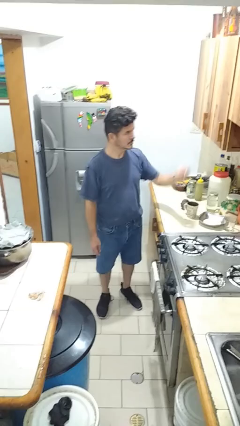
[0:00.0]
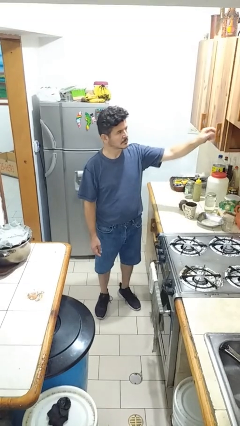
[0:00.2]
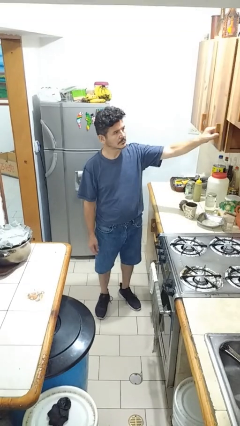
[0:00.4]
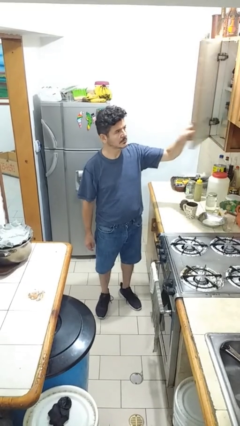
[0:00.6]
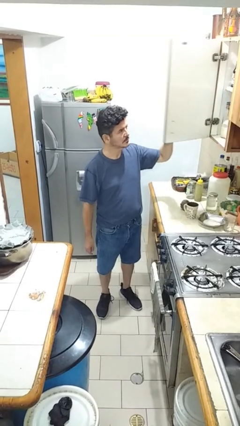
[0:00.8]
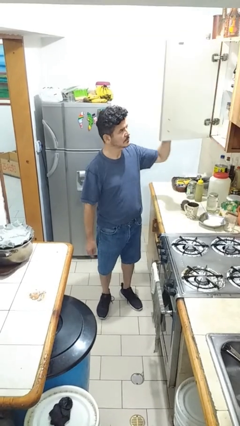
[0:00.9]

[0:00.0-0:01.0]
person opens cabinet

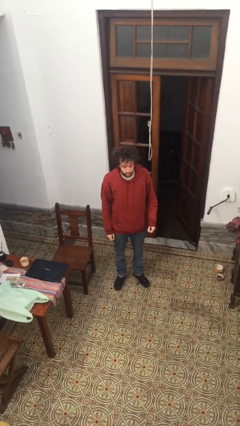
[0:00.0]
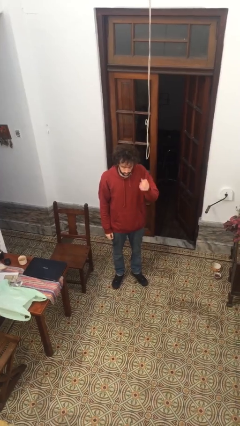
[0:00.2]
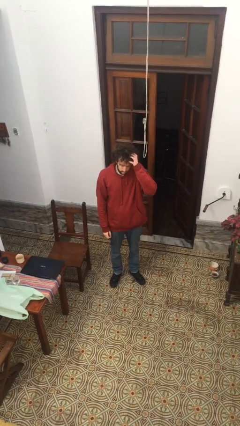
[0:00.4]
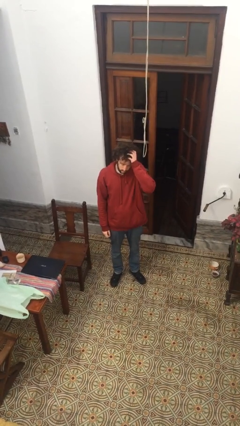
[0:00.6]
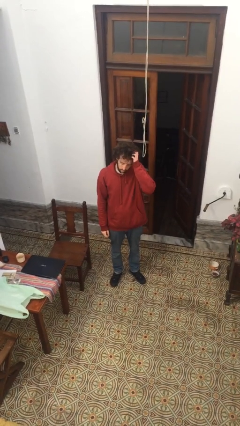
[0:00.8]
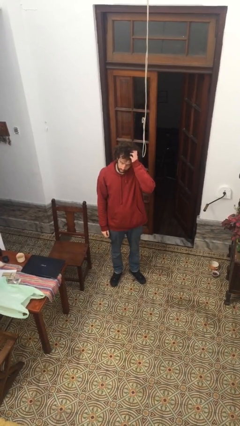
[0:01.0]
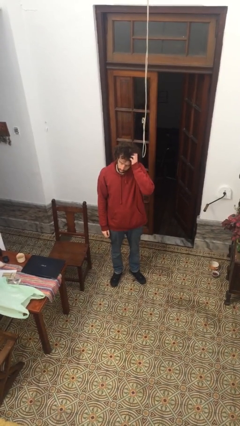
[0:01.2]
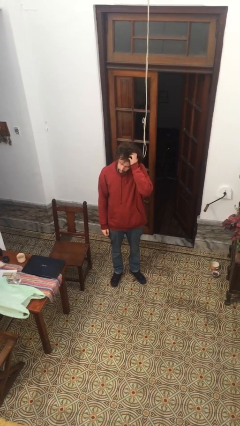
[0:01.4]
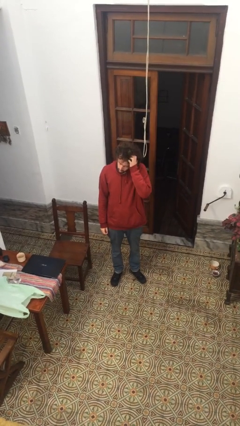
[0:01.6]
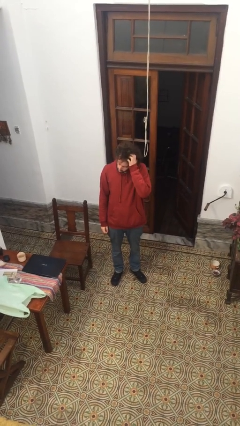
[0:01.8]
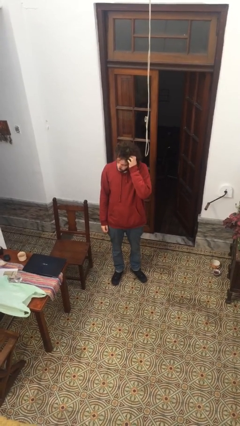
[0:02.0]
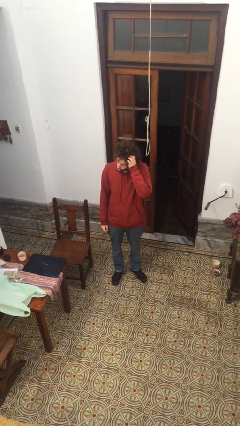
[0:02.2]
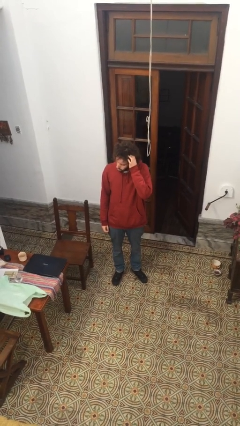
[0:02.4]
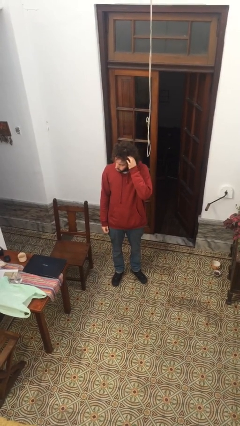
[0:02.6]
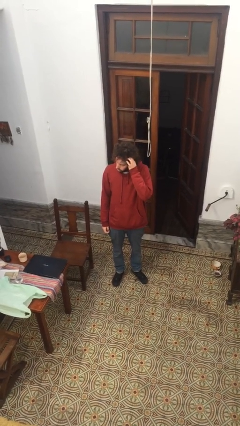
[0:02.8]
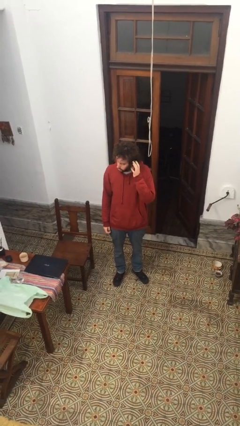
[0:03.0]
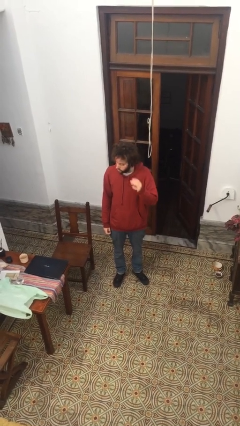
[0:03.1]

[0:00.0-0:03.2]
person scratches face

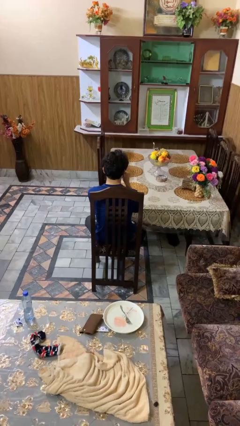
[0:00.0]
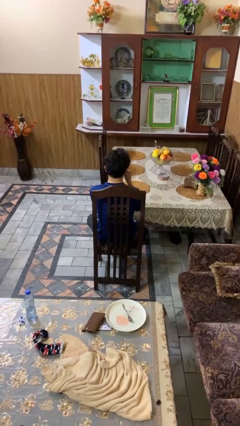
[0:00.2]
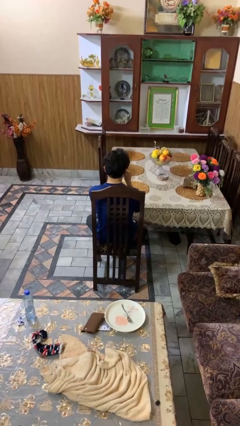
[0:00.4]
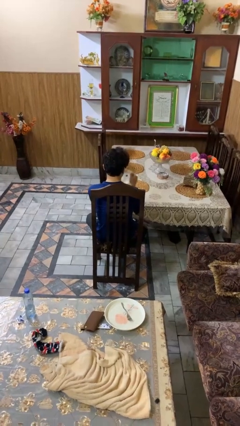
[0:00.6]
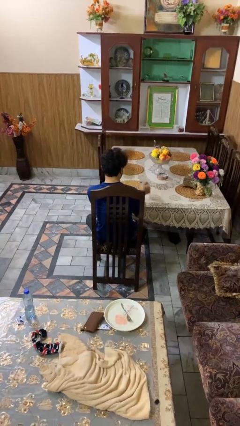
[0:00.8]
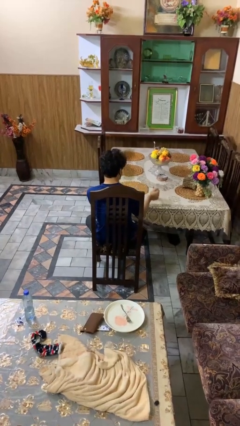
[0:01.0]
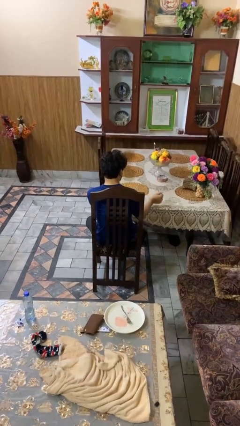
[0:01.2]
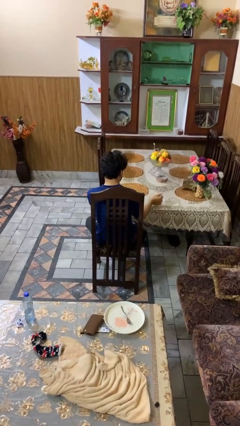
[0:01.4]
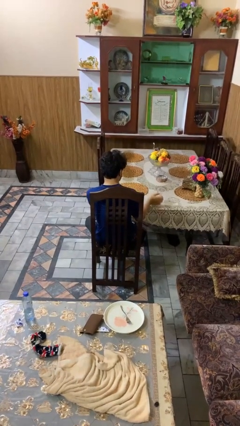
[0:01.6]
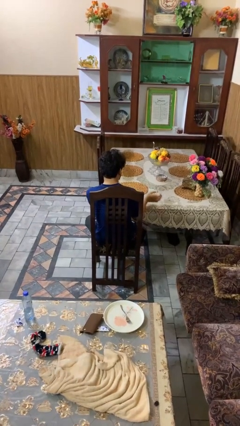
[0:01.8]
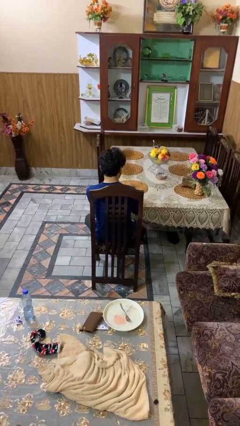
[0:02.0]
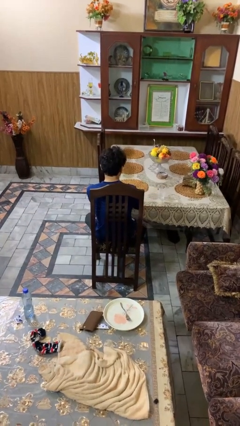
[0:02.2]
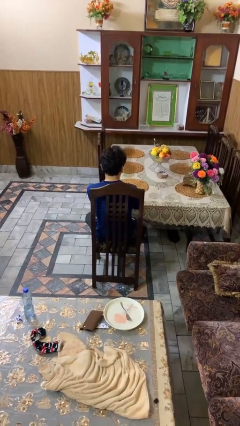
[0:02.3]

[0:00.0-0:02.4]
person puts down object on table

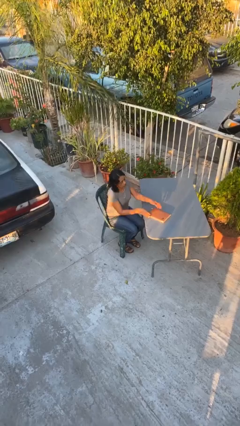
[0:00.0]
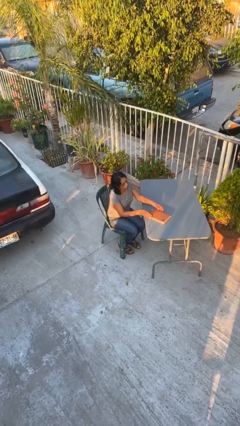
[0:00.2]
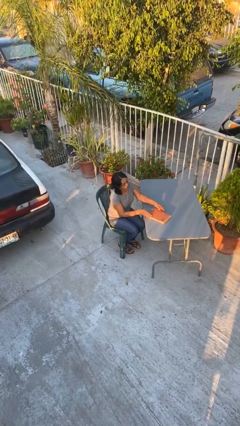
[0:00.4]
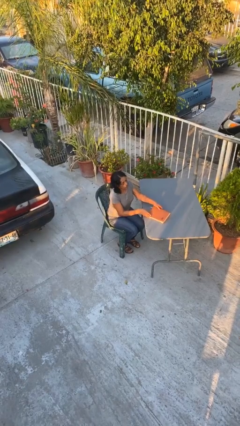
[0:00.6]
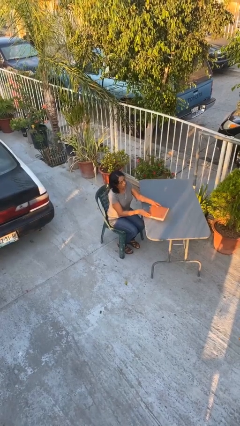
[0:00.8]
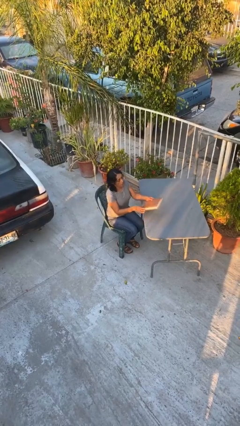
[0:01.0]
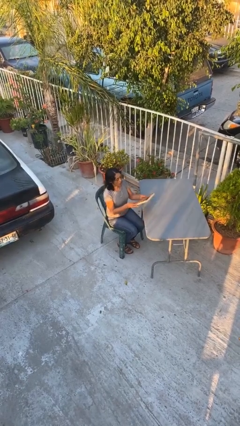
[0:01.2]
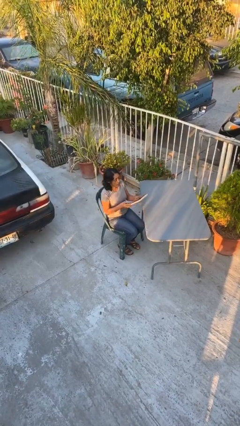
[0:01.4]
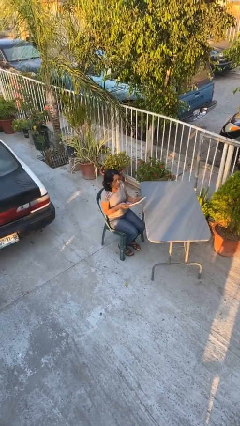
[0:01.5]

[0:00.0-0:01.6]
person picks up object from table

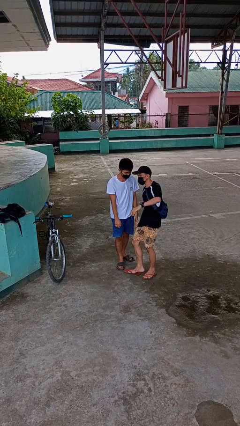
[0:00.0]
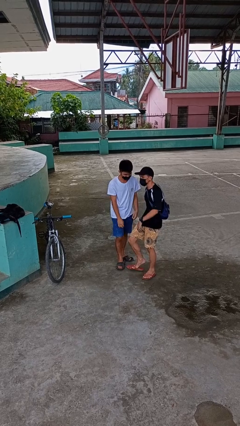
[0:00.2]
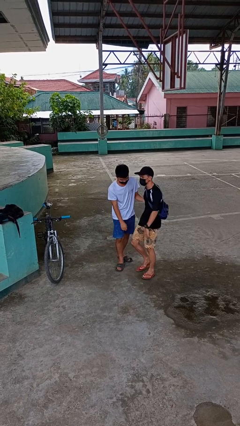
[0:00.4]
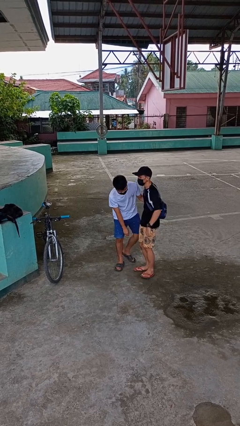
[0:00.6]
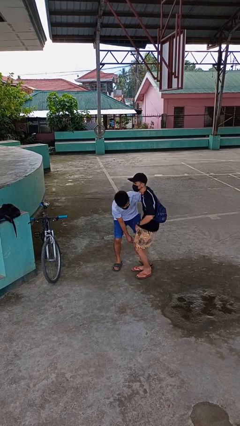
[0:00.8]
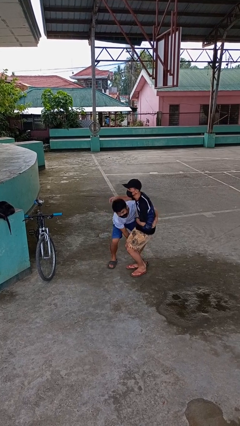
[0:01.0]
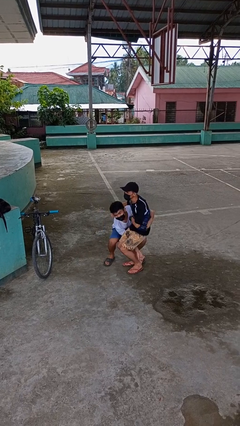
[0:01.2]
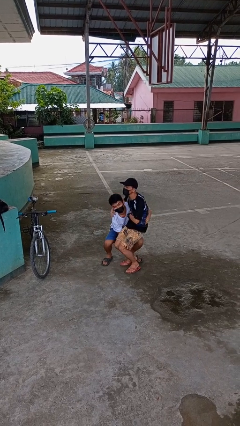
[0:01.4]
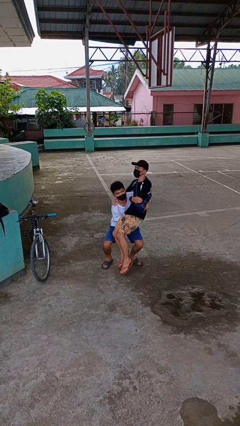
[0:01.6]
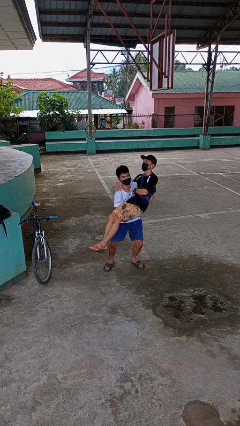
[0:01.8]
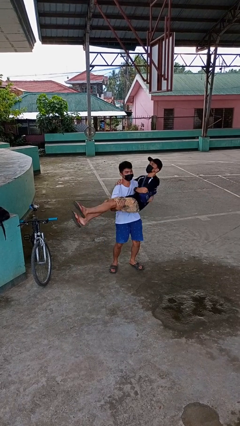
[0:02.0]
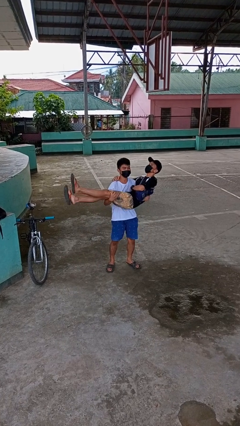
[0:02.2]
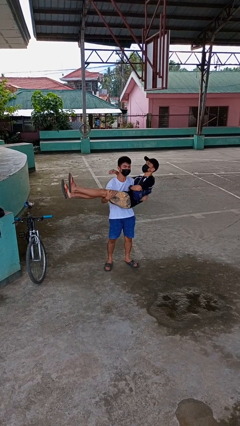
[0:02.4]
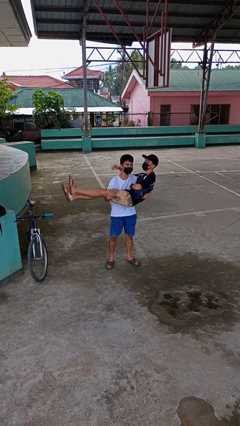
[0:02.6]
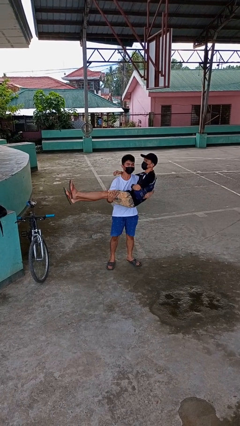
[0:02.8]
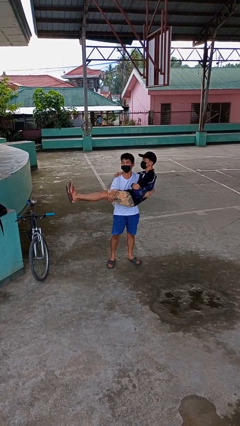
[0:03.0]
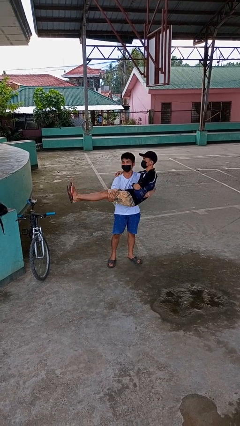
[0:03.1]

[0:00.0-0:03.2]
person picks up person

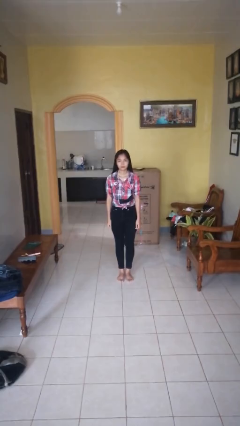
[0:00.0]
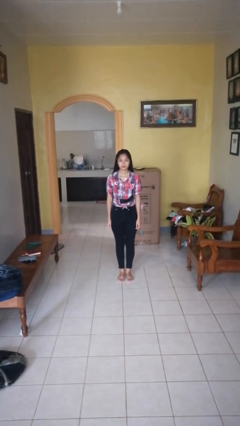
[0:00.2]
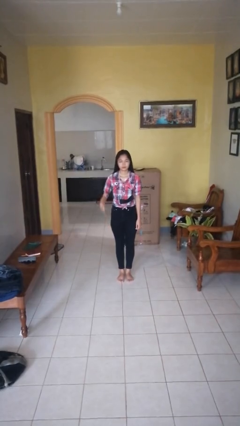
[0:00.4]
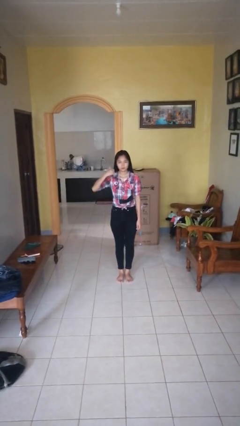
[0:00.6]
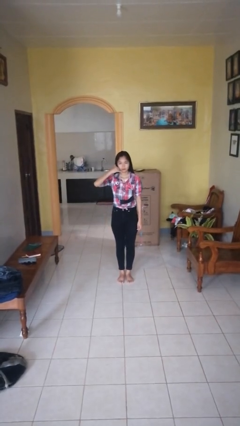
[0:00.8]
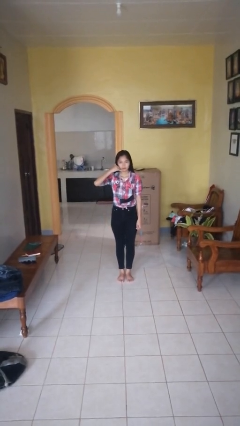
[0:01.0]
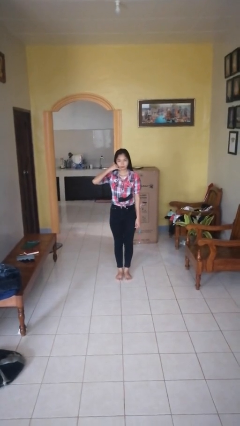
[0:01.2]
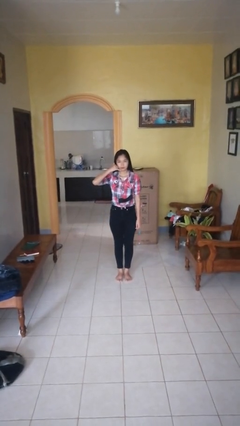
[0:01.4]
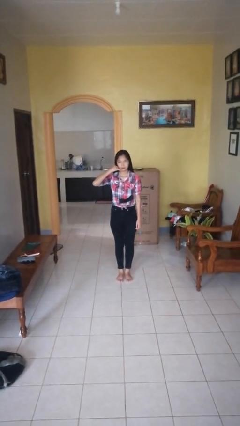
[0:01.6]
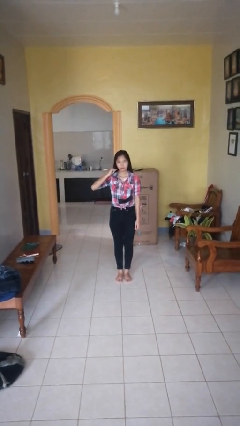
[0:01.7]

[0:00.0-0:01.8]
person gestures call me

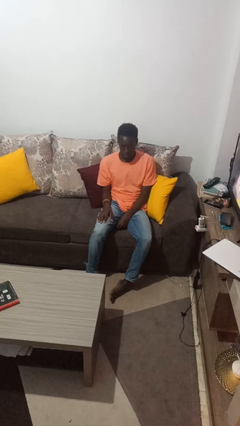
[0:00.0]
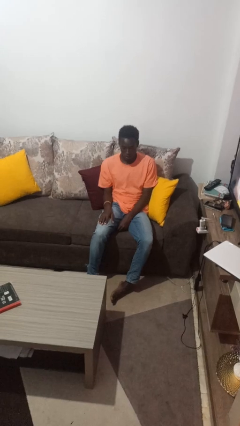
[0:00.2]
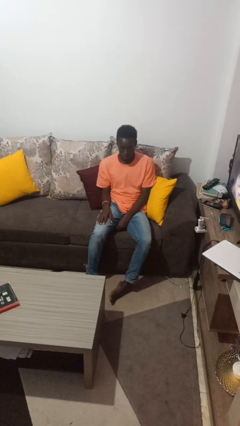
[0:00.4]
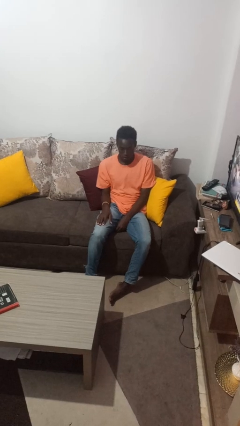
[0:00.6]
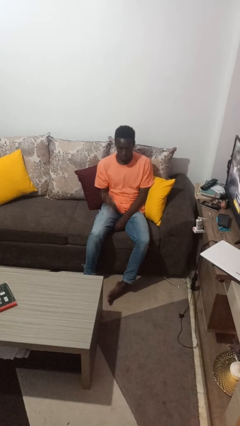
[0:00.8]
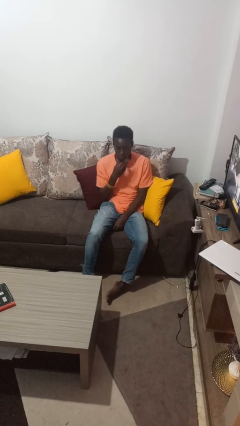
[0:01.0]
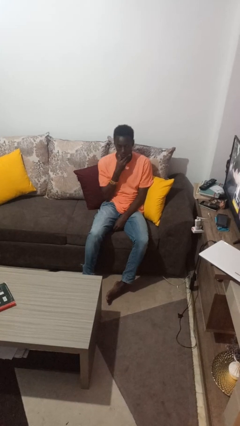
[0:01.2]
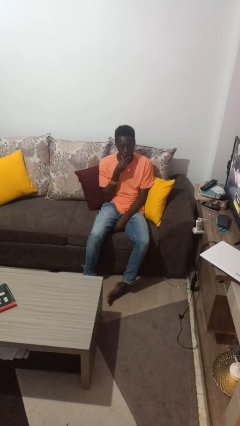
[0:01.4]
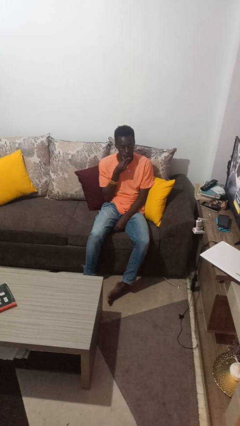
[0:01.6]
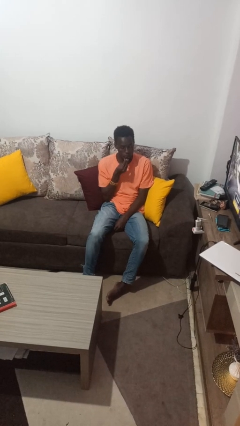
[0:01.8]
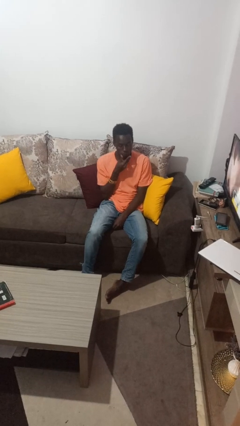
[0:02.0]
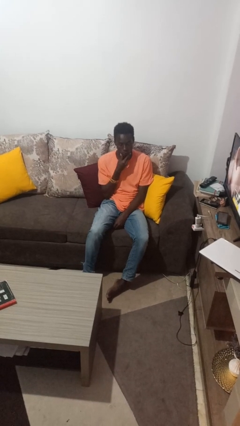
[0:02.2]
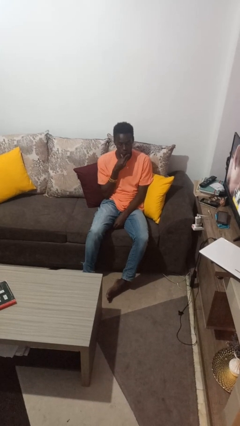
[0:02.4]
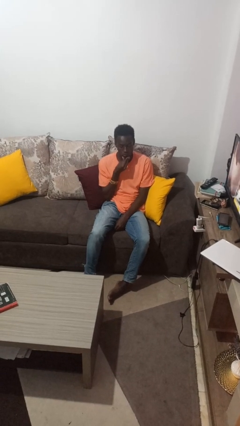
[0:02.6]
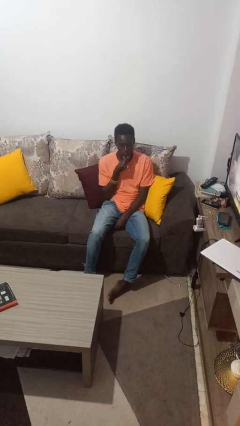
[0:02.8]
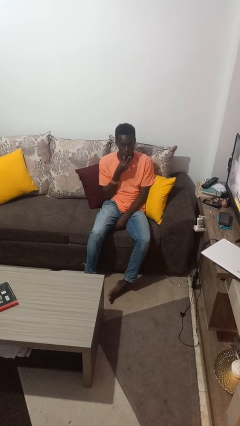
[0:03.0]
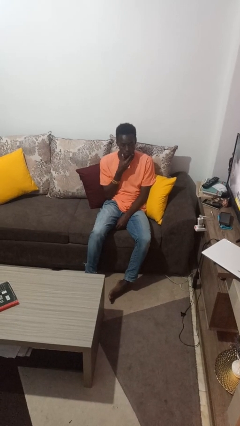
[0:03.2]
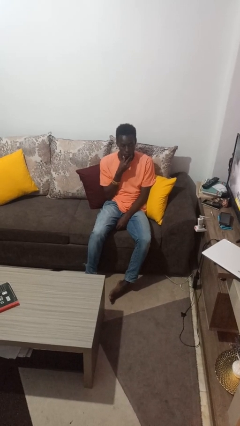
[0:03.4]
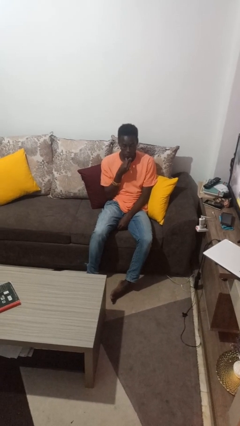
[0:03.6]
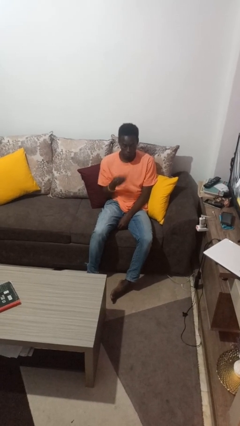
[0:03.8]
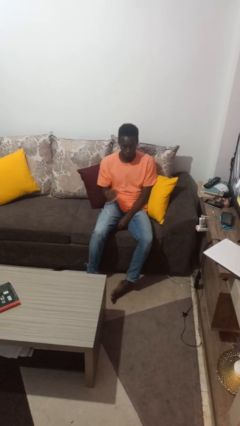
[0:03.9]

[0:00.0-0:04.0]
person strokes chin
